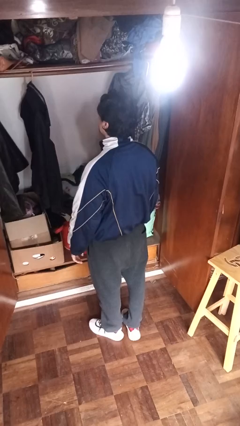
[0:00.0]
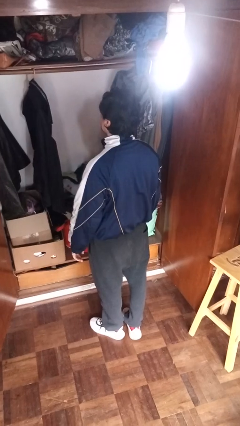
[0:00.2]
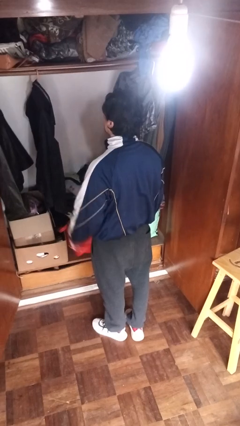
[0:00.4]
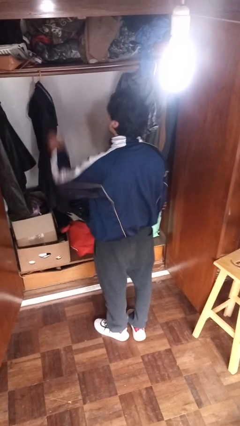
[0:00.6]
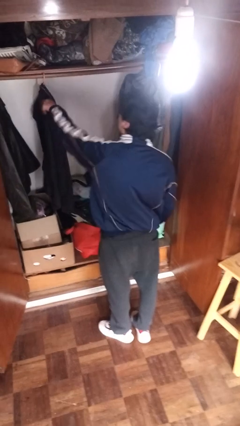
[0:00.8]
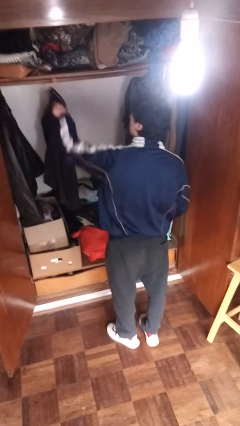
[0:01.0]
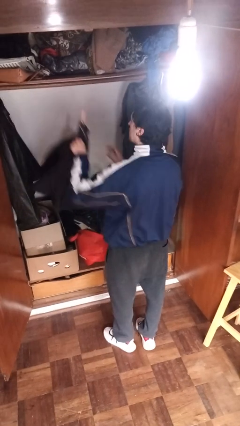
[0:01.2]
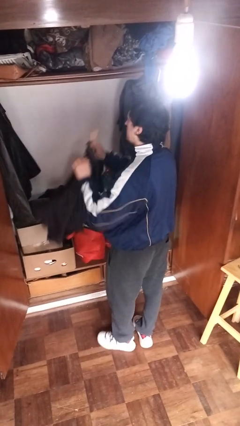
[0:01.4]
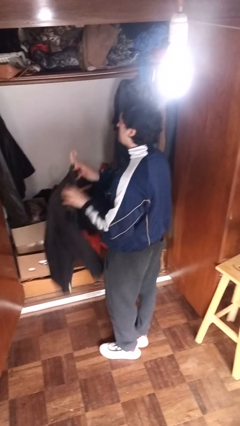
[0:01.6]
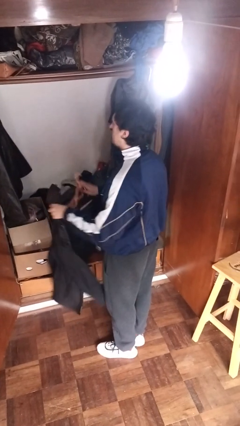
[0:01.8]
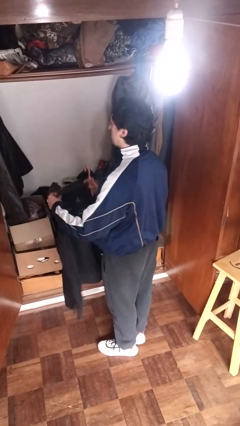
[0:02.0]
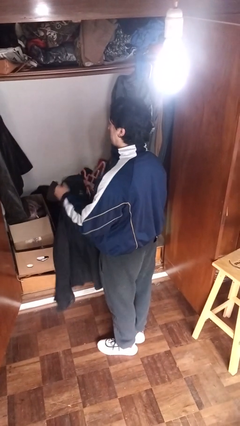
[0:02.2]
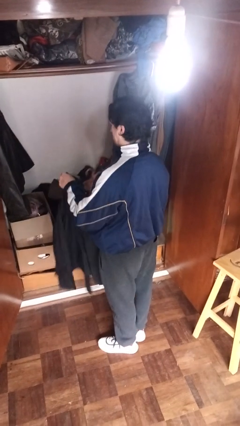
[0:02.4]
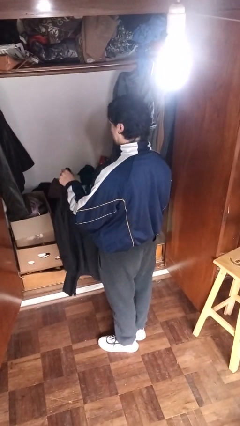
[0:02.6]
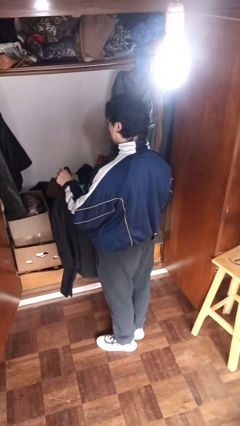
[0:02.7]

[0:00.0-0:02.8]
person takes clothes from closet

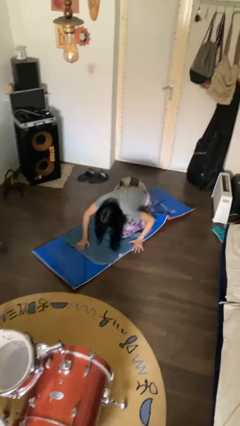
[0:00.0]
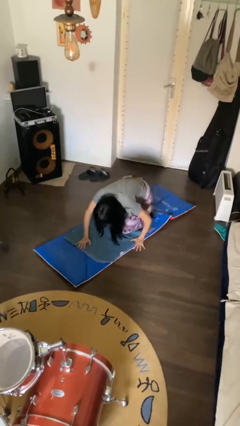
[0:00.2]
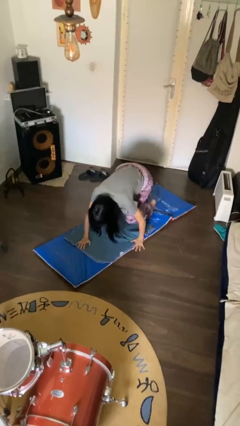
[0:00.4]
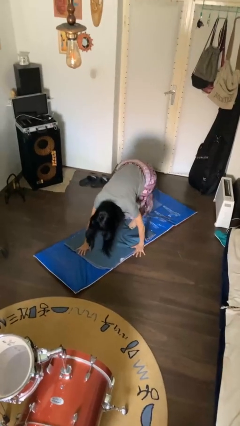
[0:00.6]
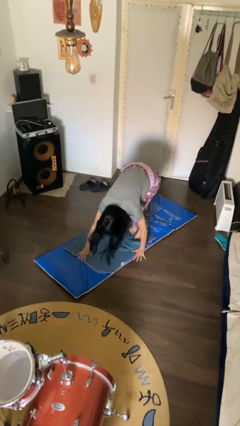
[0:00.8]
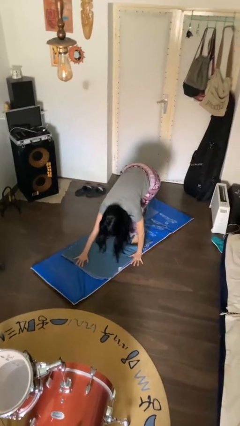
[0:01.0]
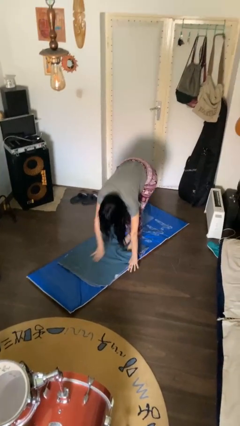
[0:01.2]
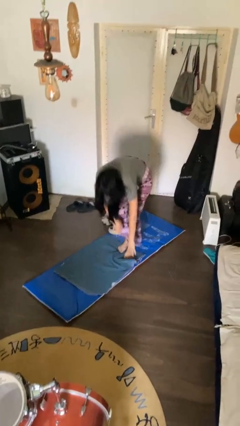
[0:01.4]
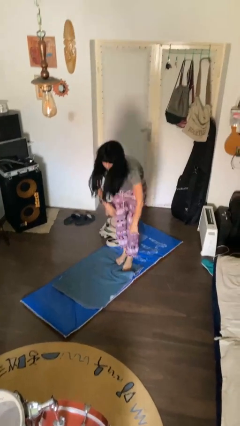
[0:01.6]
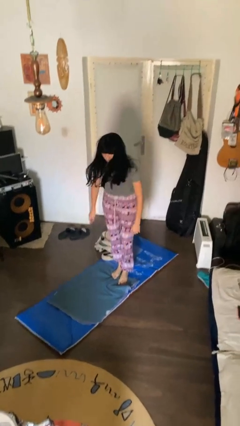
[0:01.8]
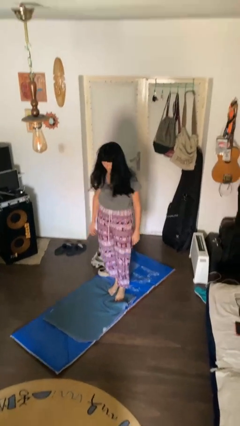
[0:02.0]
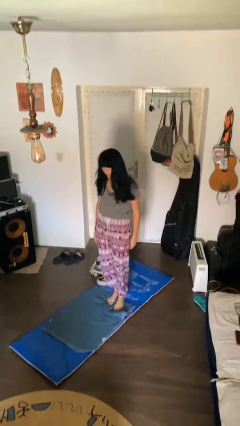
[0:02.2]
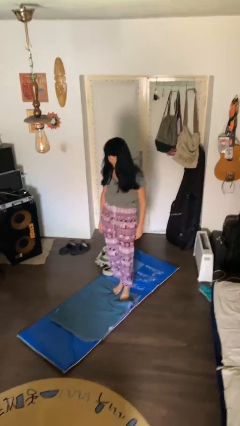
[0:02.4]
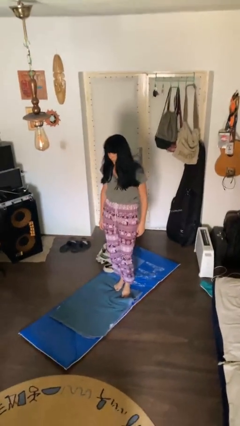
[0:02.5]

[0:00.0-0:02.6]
person stands up from floor

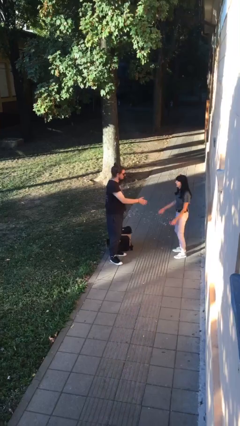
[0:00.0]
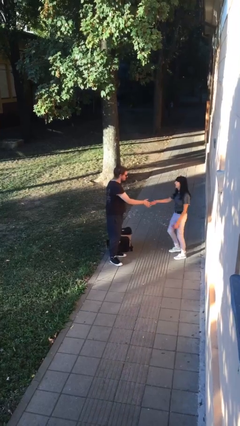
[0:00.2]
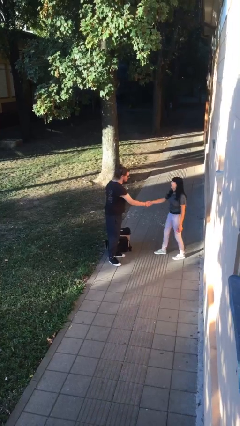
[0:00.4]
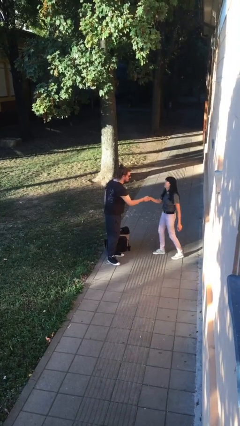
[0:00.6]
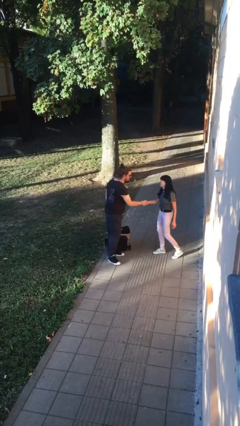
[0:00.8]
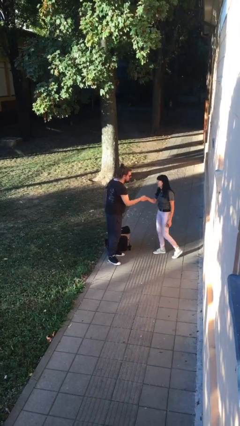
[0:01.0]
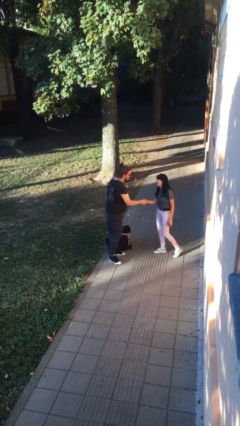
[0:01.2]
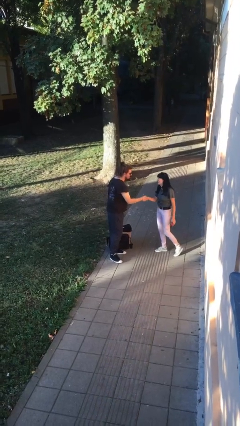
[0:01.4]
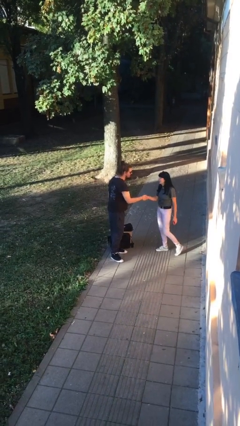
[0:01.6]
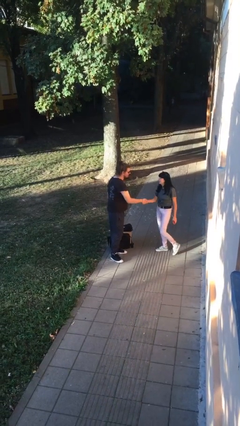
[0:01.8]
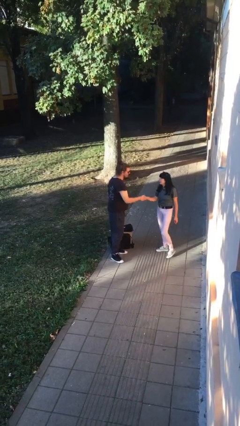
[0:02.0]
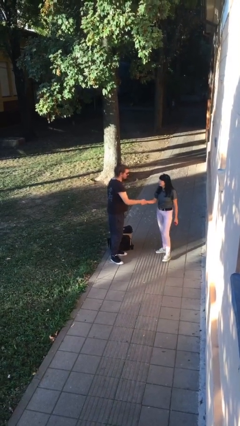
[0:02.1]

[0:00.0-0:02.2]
person shakes hand

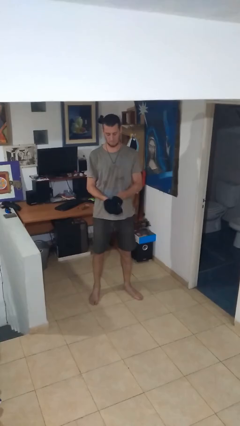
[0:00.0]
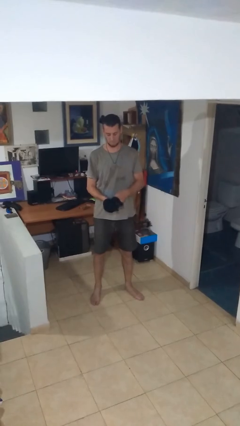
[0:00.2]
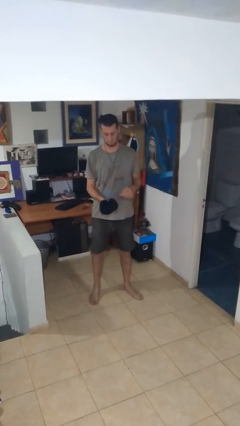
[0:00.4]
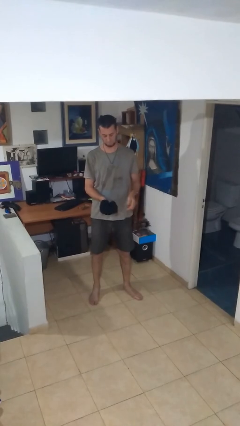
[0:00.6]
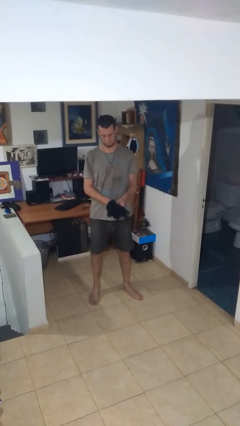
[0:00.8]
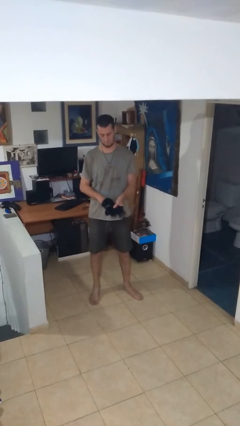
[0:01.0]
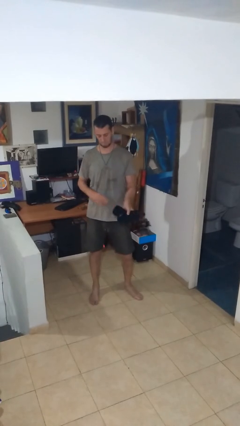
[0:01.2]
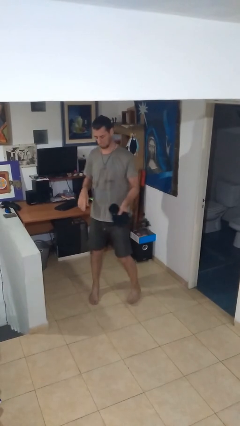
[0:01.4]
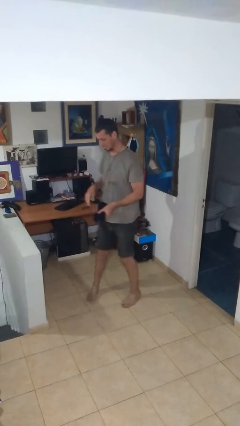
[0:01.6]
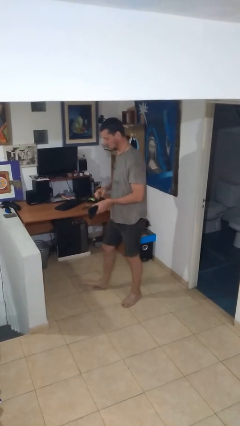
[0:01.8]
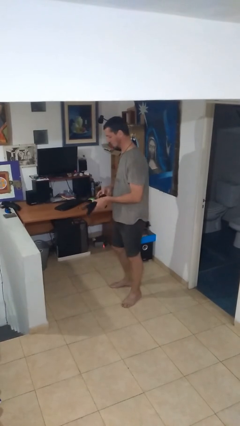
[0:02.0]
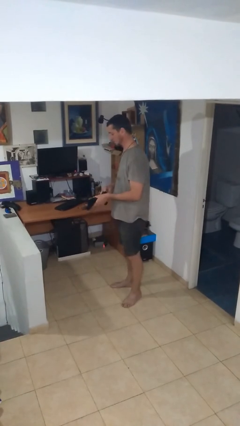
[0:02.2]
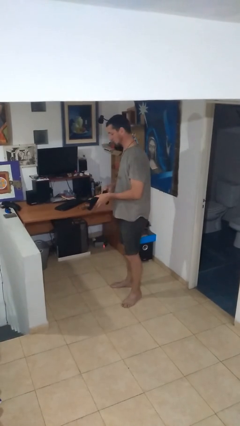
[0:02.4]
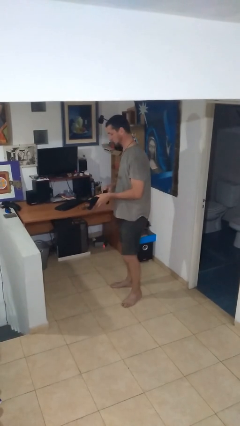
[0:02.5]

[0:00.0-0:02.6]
person takes off gloves

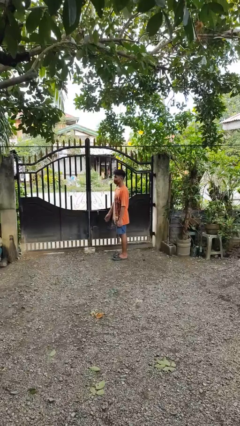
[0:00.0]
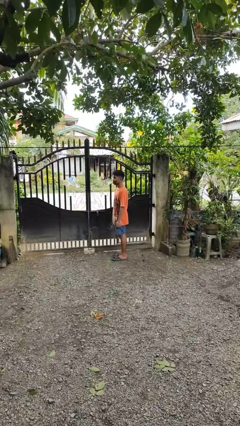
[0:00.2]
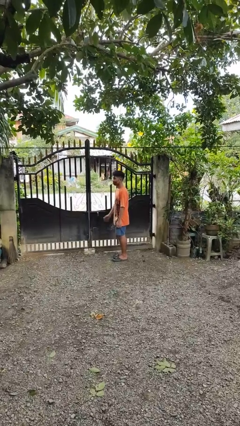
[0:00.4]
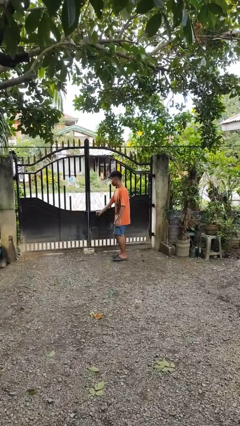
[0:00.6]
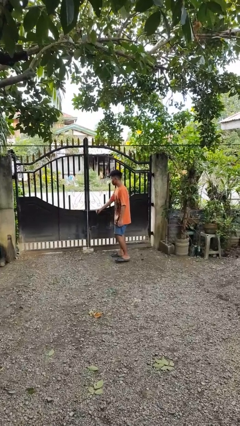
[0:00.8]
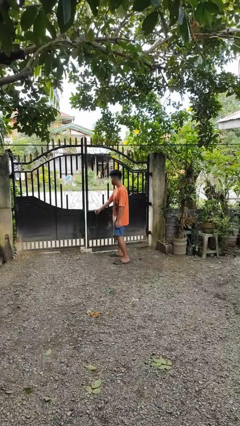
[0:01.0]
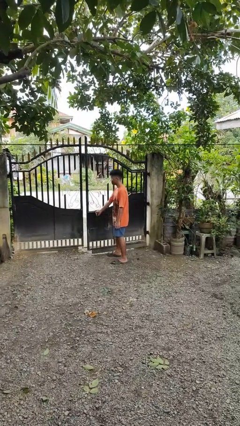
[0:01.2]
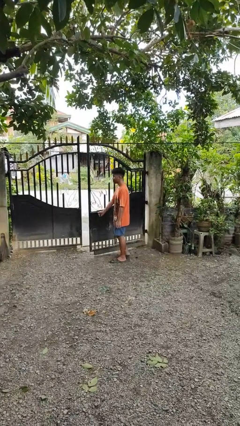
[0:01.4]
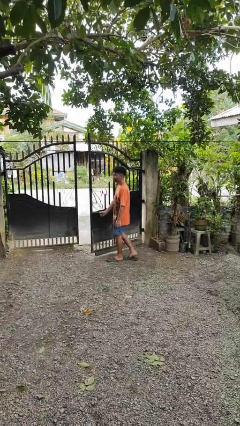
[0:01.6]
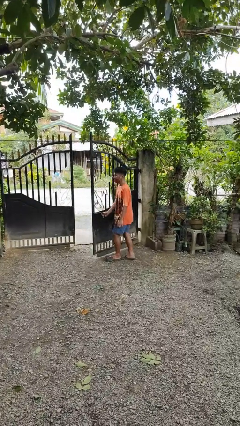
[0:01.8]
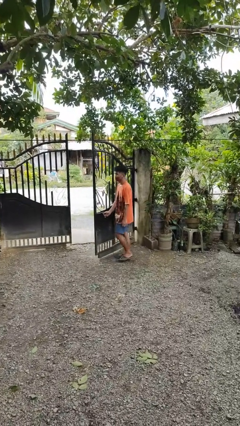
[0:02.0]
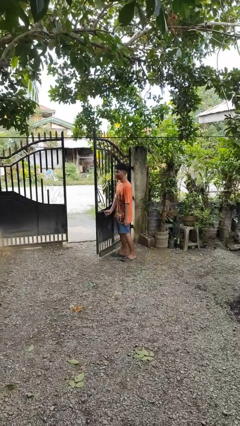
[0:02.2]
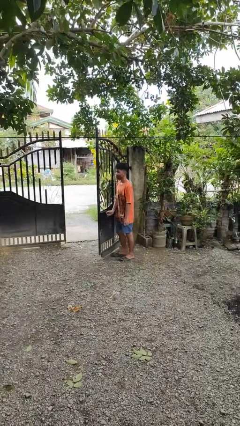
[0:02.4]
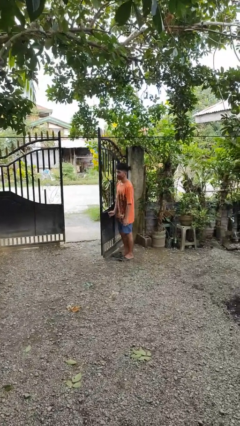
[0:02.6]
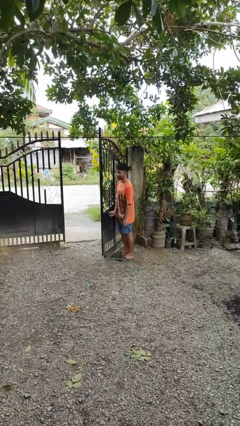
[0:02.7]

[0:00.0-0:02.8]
person opens gate

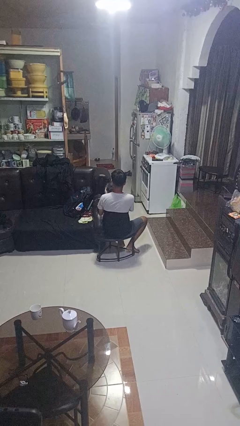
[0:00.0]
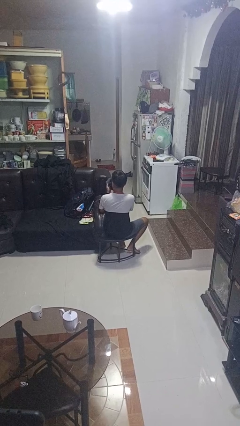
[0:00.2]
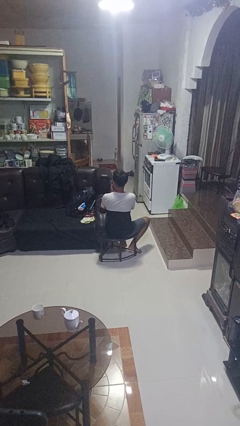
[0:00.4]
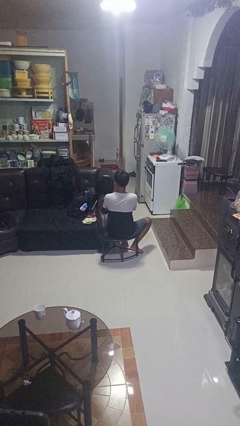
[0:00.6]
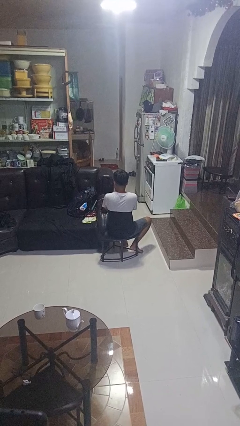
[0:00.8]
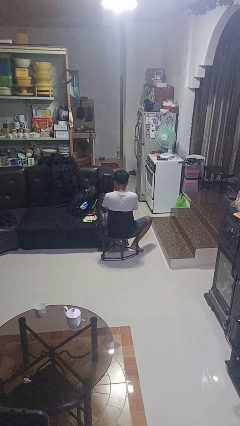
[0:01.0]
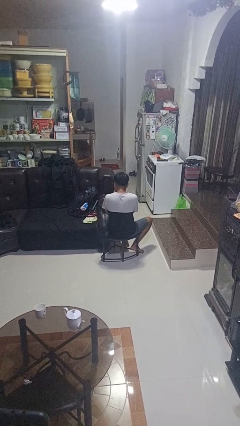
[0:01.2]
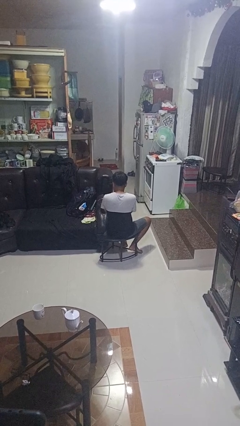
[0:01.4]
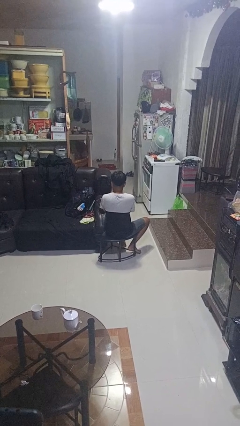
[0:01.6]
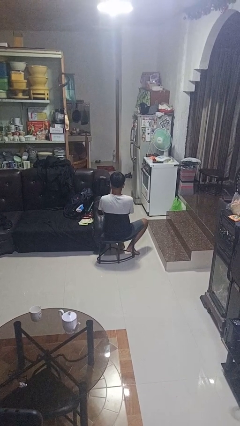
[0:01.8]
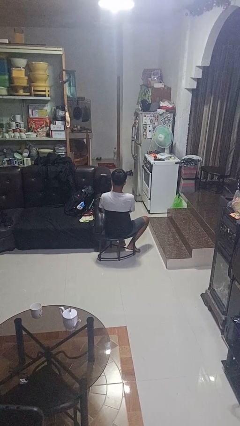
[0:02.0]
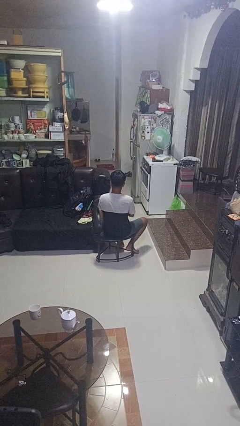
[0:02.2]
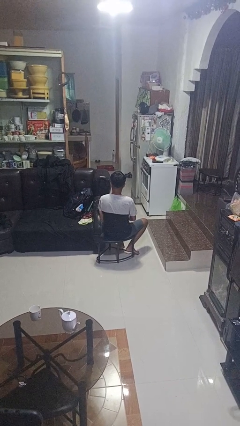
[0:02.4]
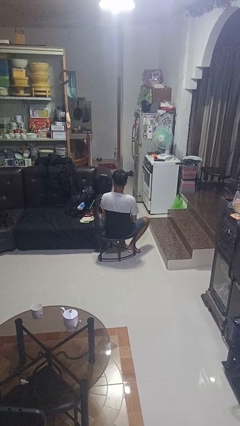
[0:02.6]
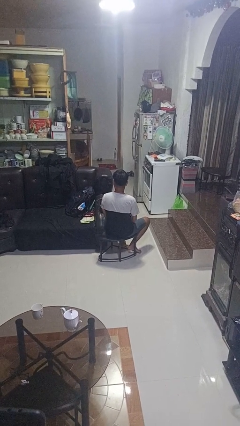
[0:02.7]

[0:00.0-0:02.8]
person blows nose

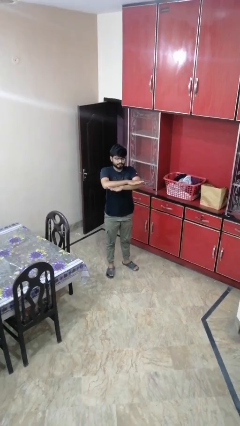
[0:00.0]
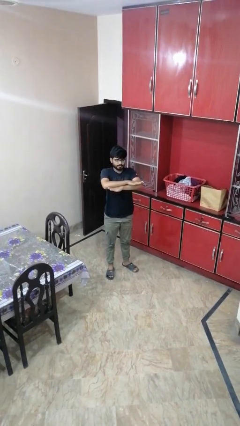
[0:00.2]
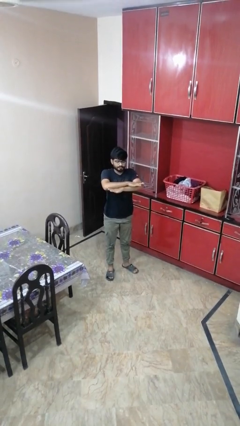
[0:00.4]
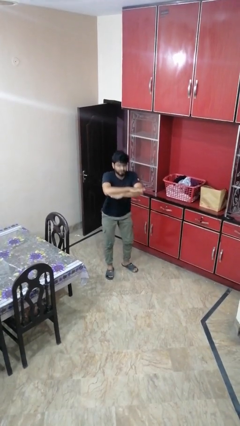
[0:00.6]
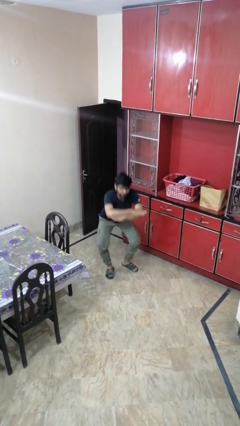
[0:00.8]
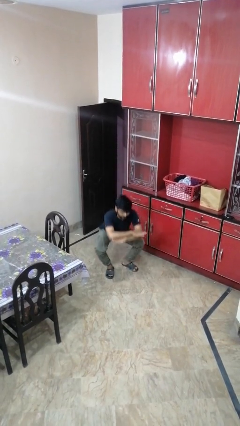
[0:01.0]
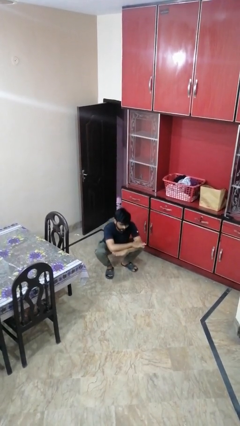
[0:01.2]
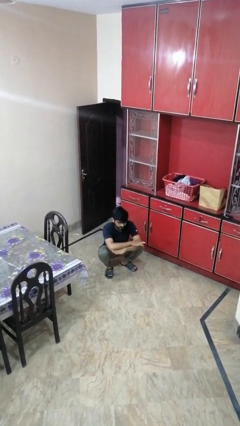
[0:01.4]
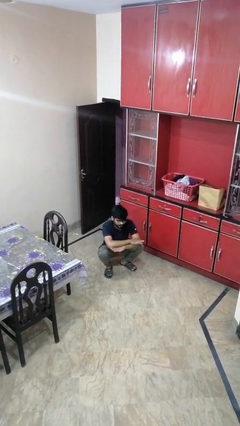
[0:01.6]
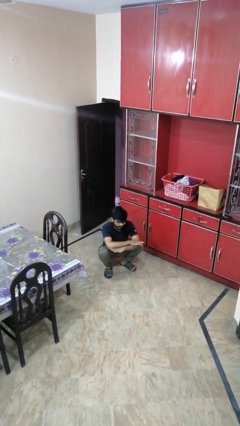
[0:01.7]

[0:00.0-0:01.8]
person squats
